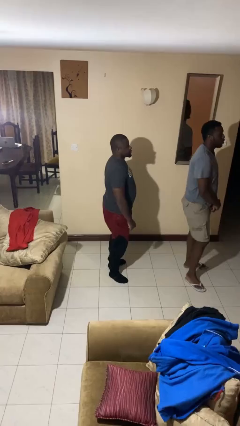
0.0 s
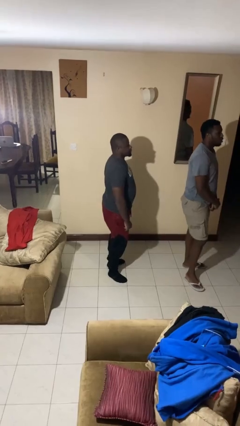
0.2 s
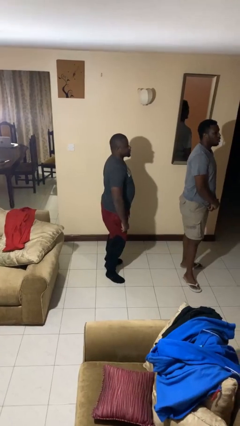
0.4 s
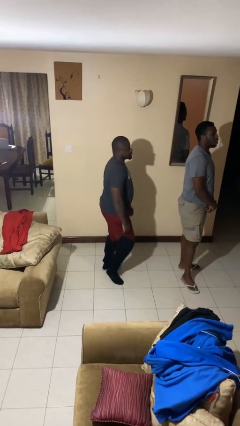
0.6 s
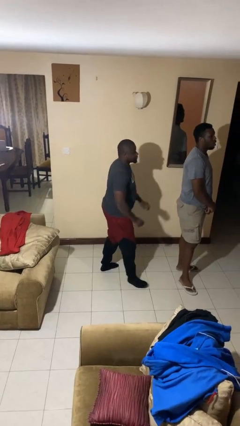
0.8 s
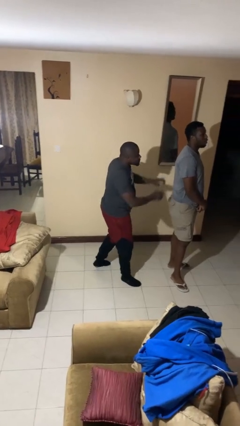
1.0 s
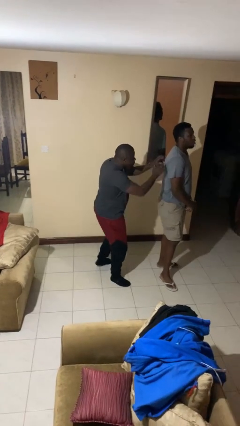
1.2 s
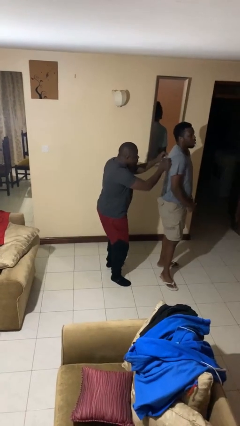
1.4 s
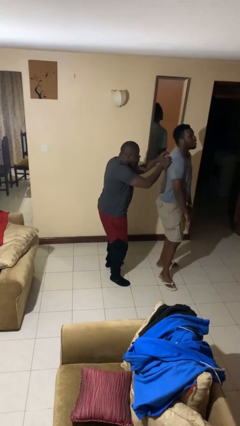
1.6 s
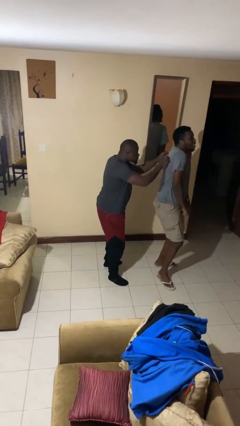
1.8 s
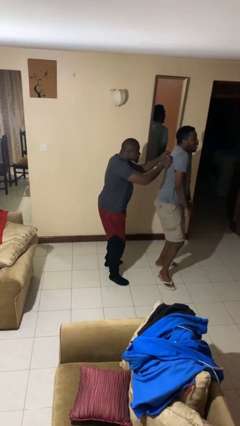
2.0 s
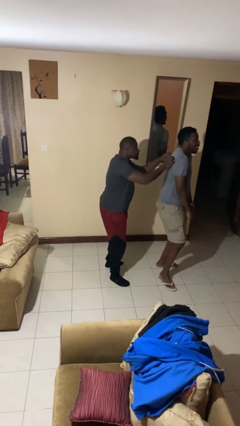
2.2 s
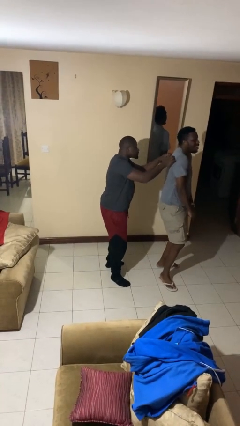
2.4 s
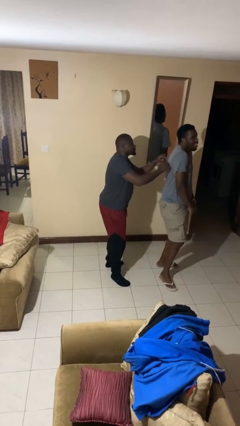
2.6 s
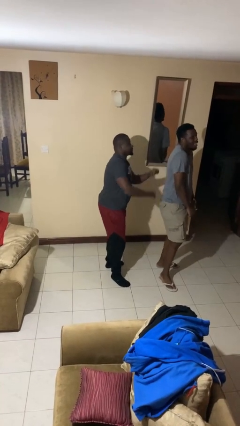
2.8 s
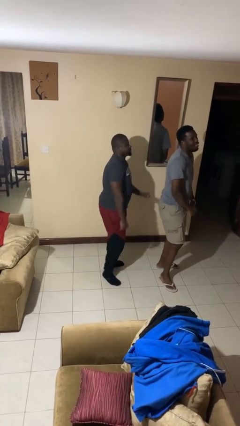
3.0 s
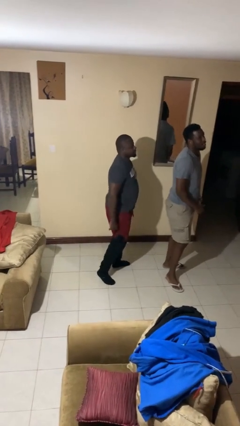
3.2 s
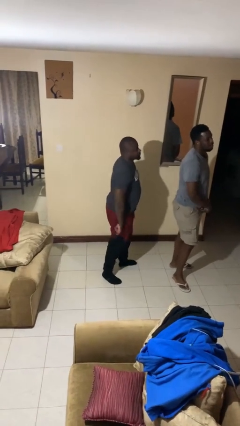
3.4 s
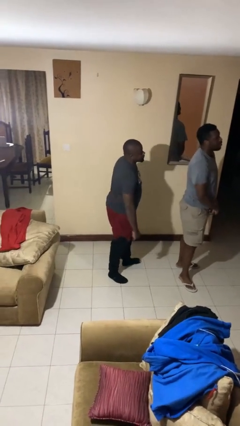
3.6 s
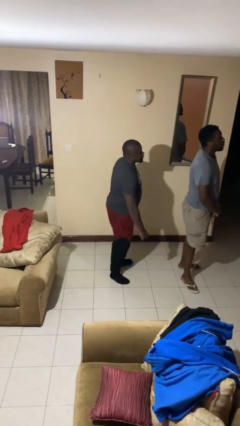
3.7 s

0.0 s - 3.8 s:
person tickles person

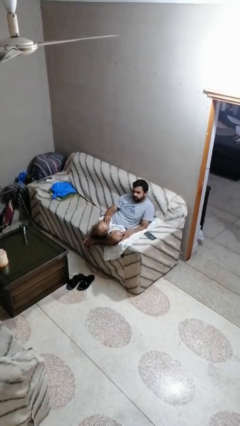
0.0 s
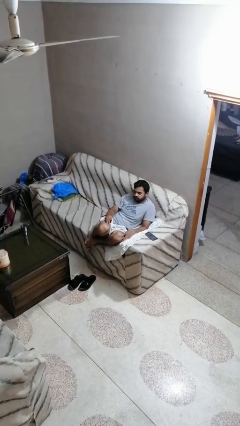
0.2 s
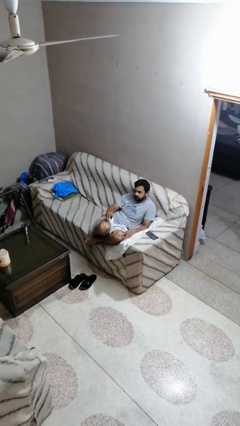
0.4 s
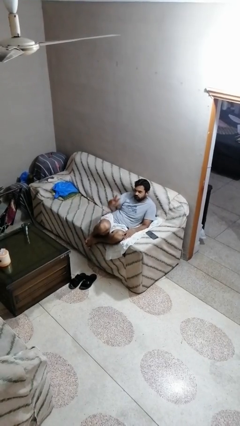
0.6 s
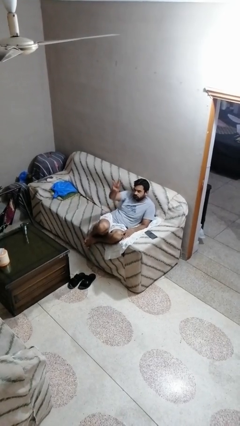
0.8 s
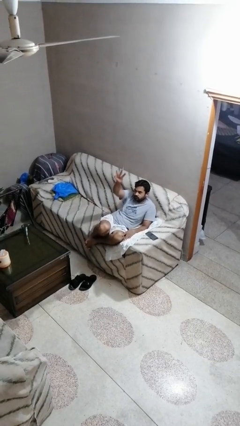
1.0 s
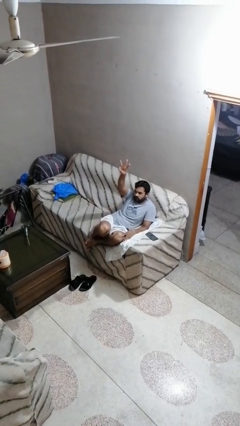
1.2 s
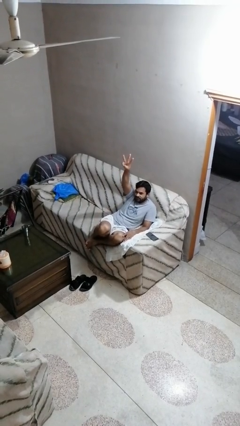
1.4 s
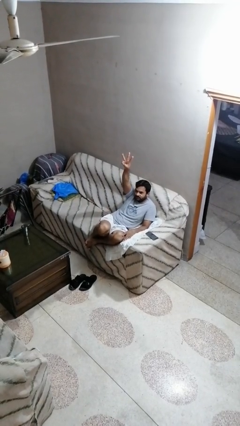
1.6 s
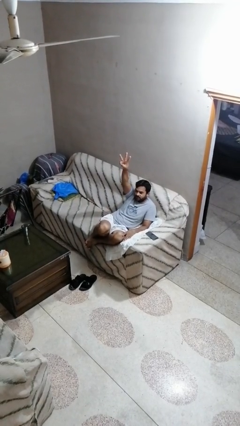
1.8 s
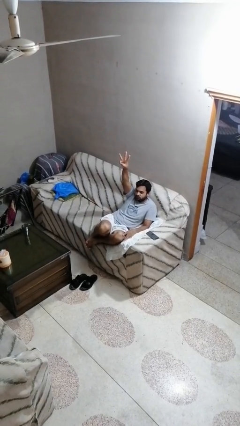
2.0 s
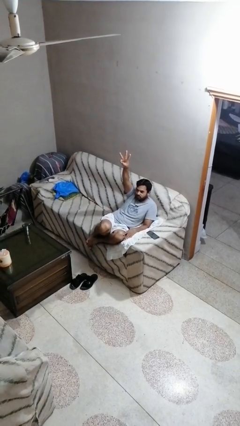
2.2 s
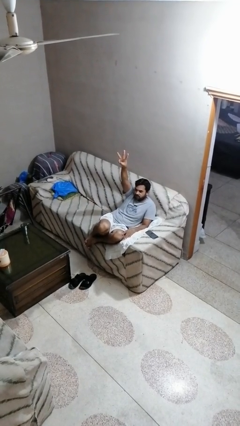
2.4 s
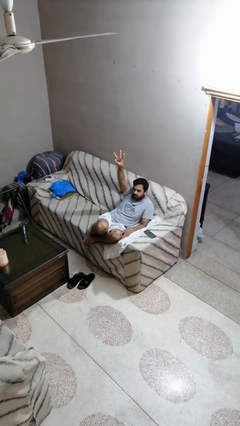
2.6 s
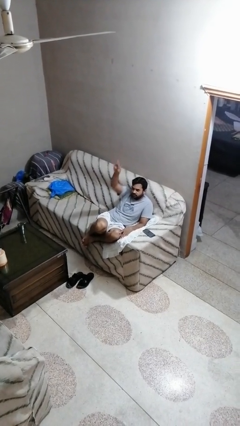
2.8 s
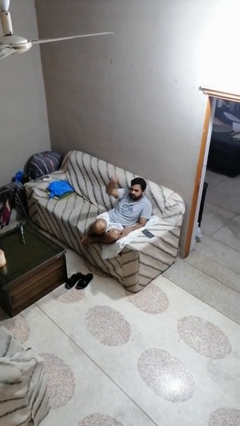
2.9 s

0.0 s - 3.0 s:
person gestures number three

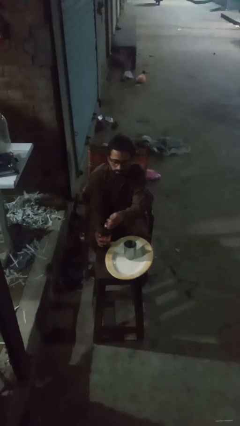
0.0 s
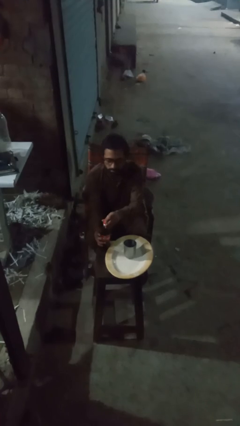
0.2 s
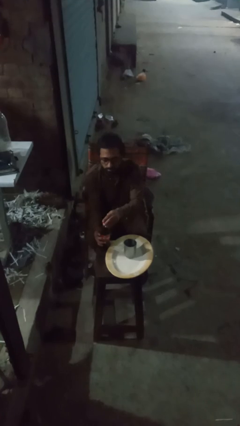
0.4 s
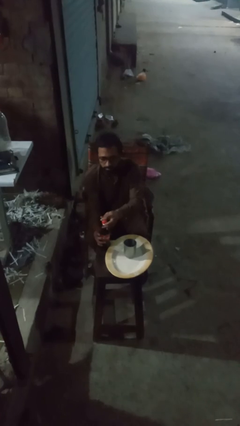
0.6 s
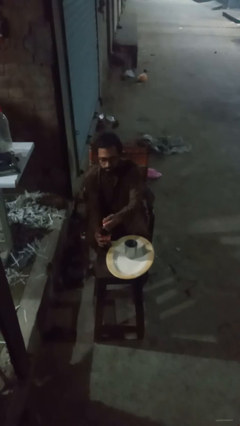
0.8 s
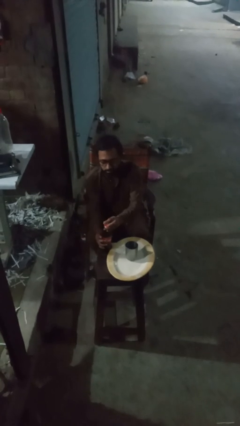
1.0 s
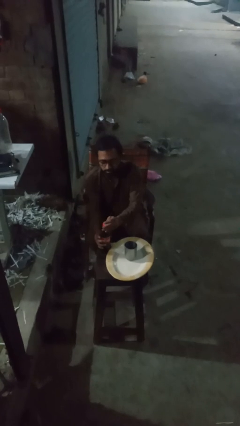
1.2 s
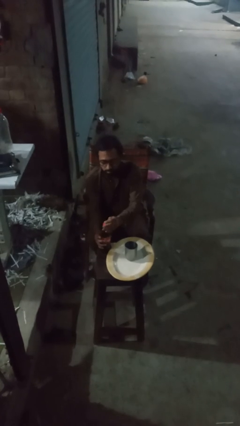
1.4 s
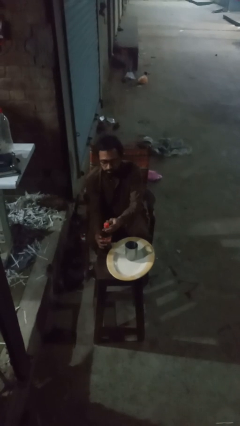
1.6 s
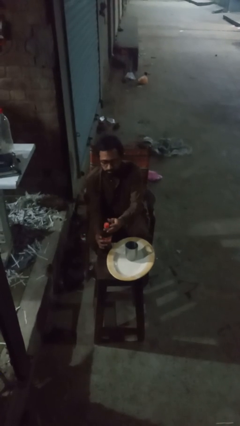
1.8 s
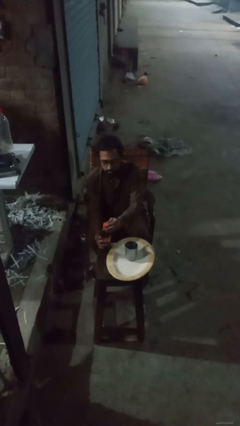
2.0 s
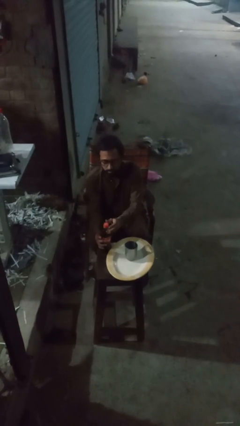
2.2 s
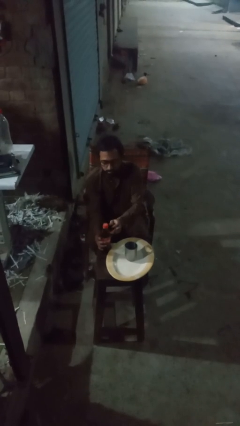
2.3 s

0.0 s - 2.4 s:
person screws lid to bottle

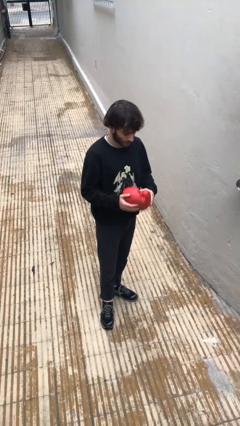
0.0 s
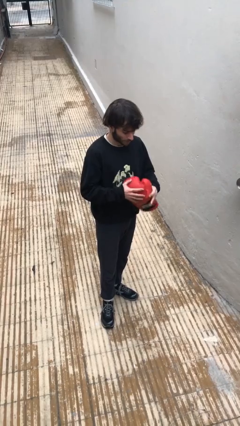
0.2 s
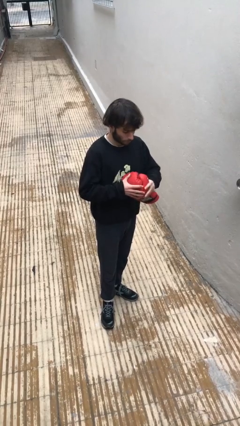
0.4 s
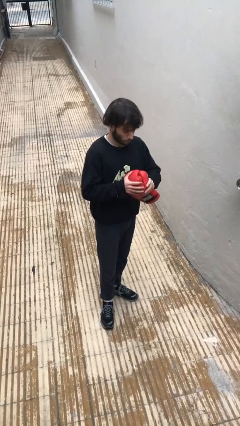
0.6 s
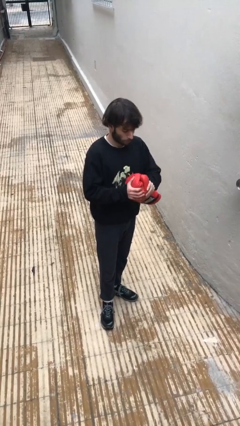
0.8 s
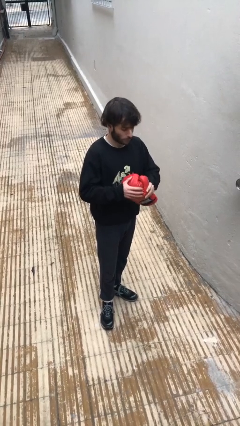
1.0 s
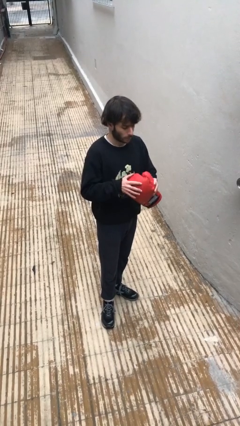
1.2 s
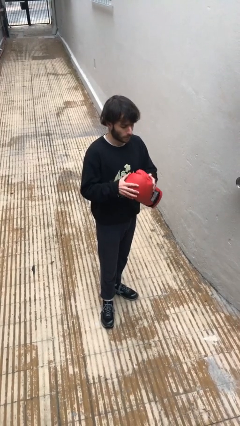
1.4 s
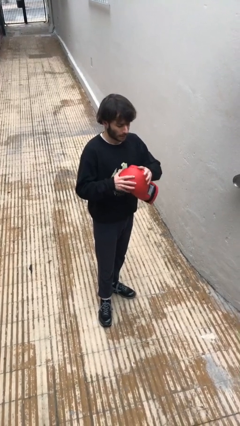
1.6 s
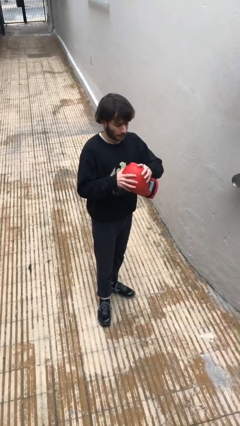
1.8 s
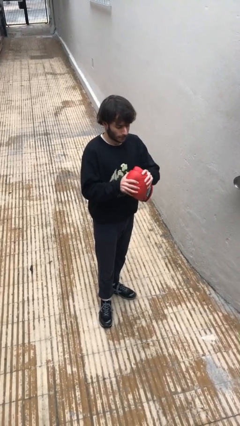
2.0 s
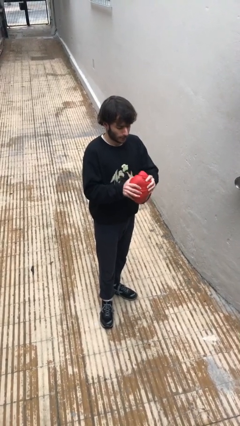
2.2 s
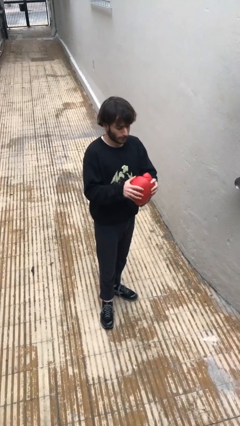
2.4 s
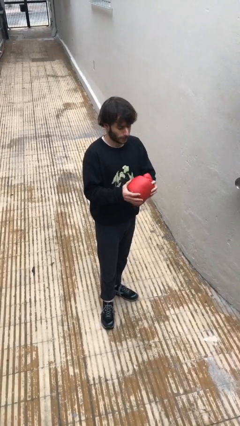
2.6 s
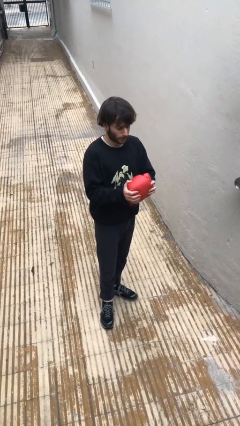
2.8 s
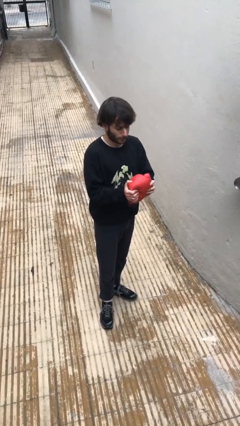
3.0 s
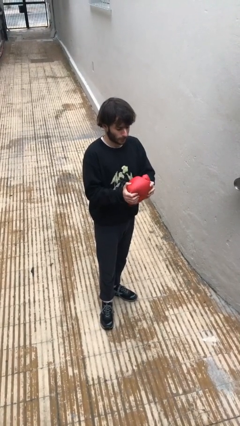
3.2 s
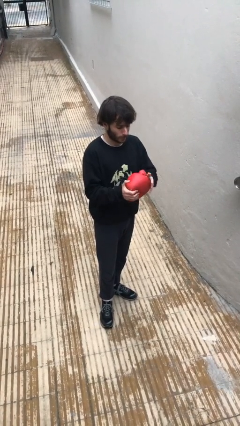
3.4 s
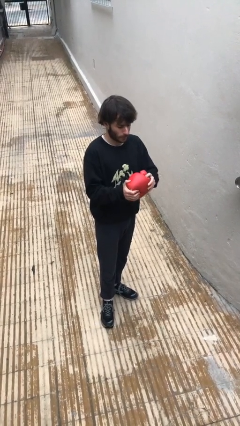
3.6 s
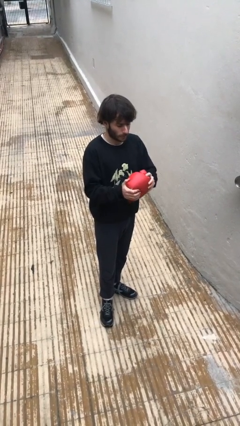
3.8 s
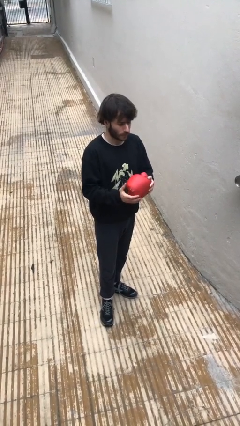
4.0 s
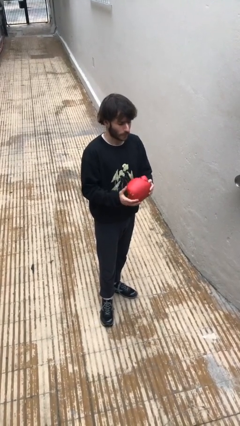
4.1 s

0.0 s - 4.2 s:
person squeezes object

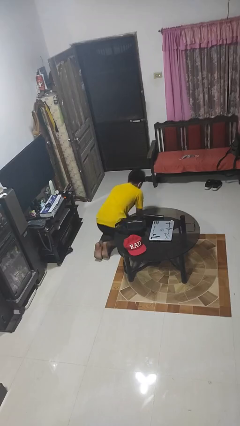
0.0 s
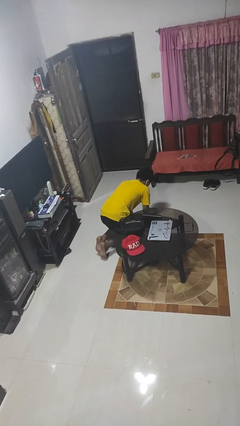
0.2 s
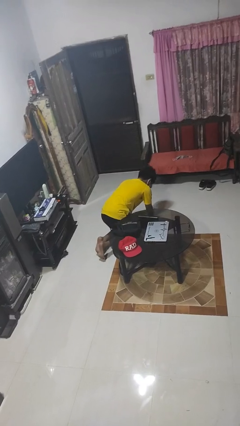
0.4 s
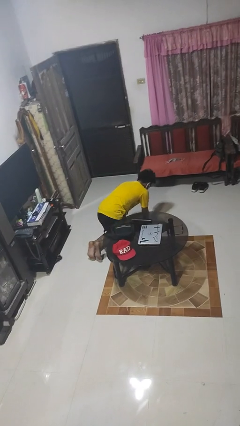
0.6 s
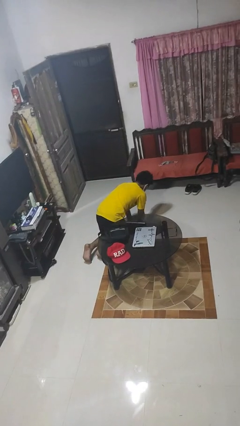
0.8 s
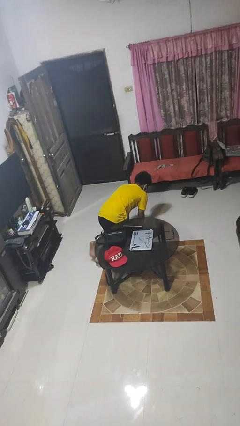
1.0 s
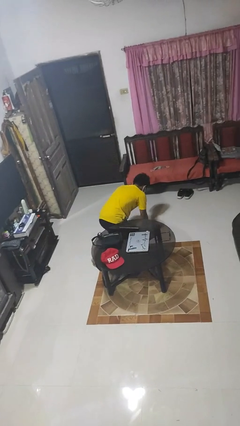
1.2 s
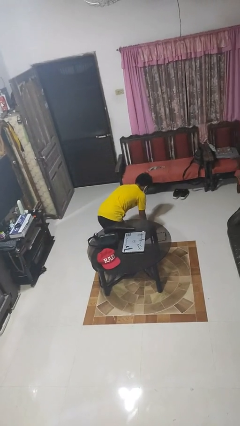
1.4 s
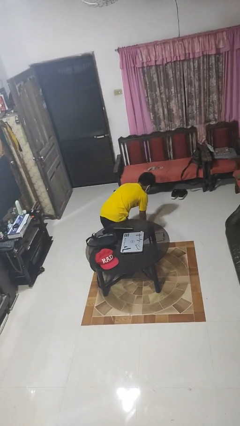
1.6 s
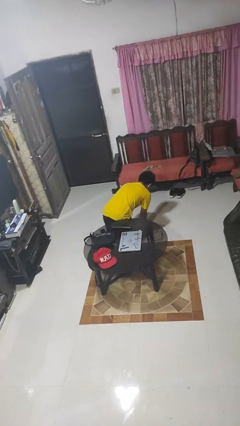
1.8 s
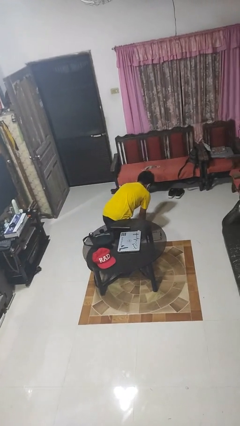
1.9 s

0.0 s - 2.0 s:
person crawls

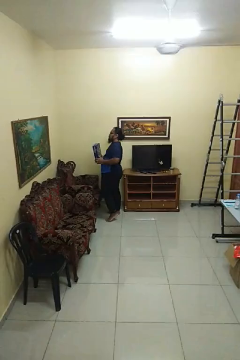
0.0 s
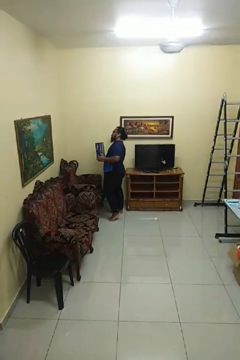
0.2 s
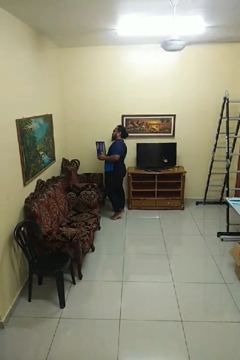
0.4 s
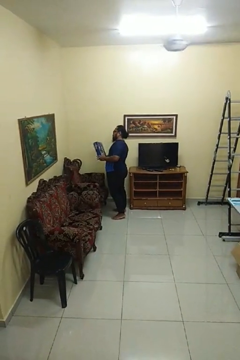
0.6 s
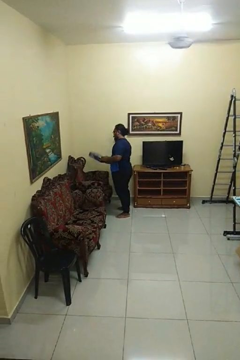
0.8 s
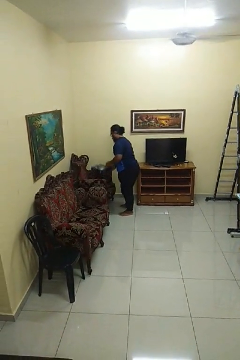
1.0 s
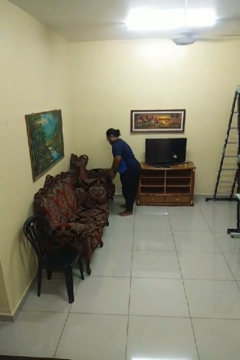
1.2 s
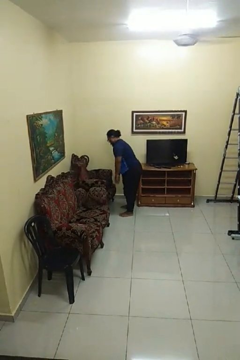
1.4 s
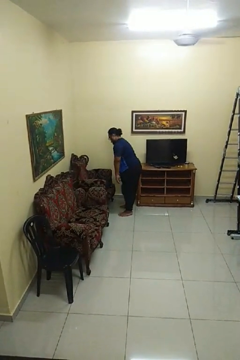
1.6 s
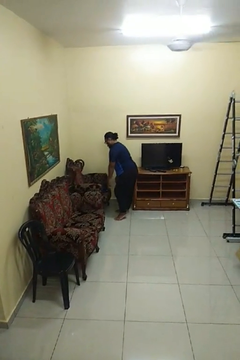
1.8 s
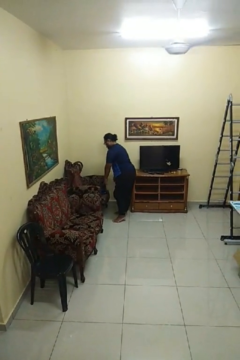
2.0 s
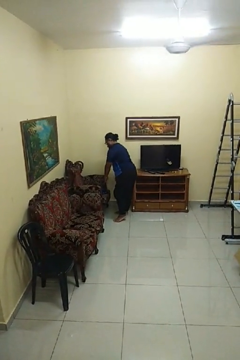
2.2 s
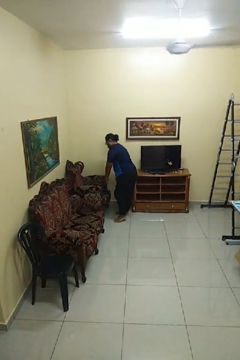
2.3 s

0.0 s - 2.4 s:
person puts down object on couch

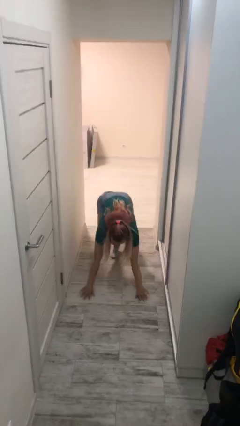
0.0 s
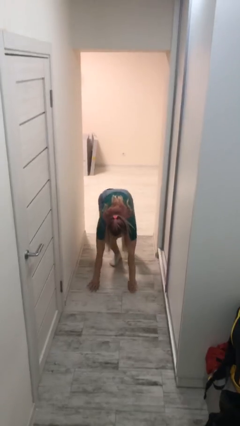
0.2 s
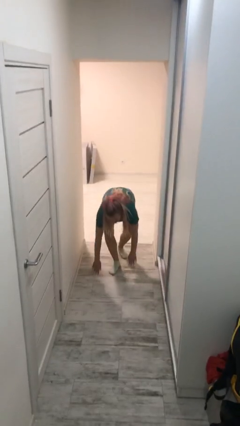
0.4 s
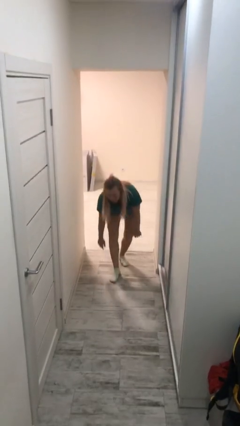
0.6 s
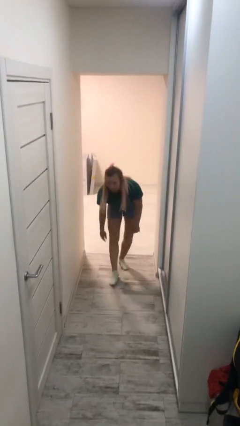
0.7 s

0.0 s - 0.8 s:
person stands up from floor
